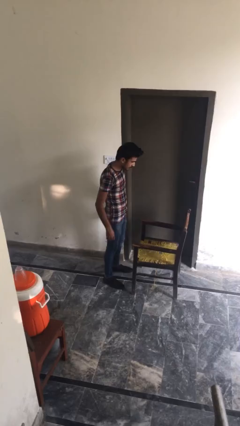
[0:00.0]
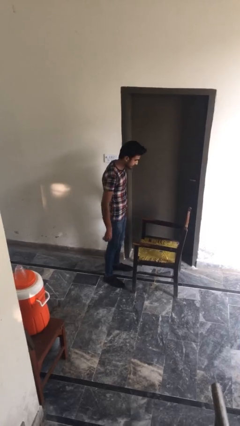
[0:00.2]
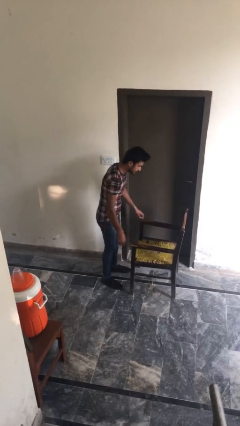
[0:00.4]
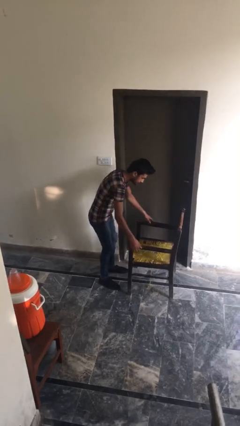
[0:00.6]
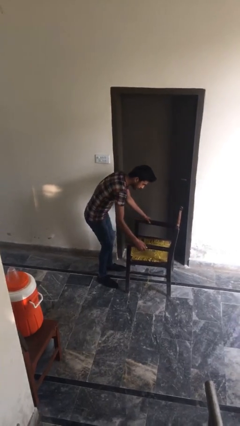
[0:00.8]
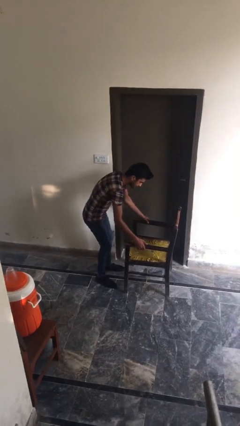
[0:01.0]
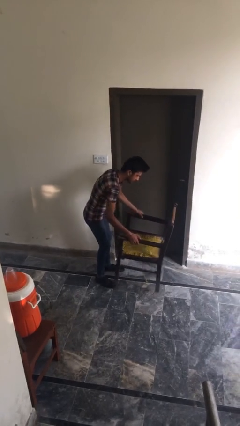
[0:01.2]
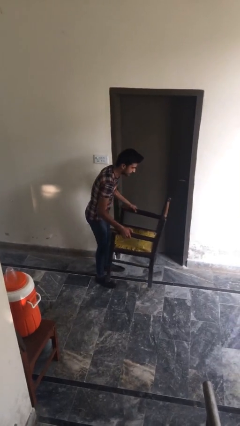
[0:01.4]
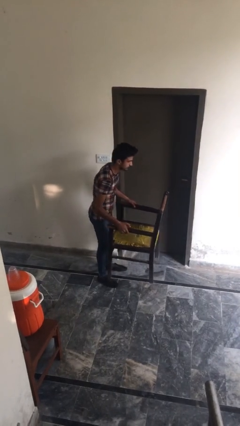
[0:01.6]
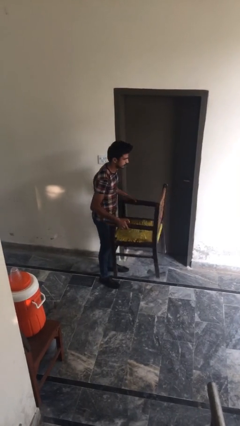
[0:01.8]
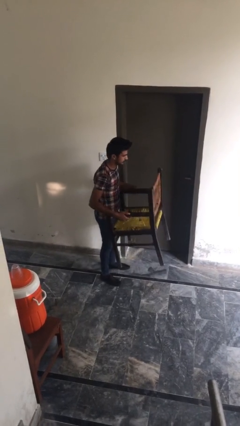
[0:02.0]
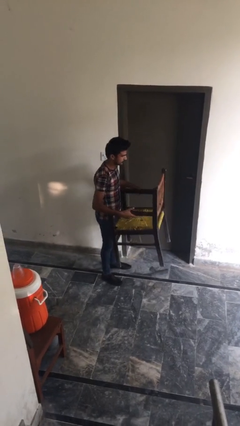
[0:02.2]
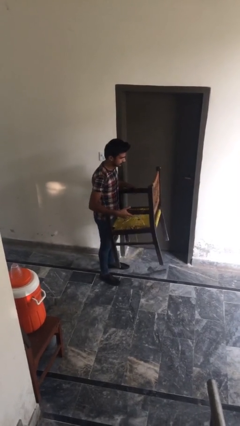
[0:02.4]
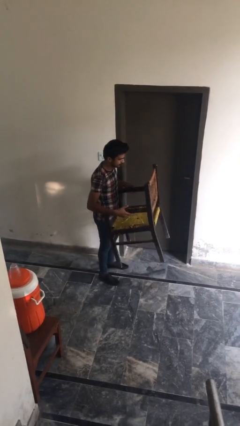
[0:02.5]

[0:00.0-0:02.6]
person picks up object from floor

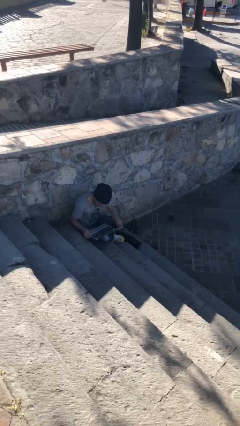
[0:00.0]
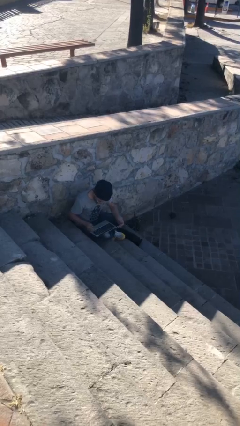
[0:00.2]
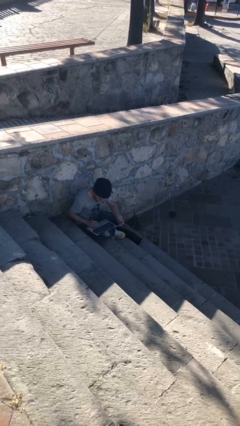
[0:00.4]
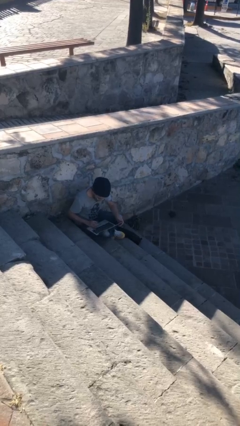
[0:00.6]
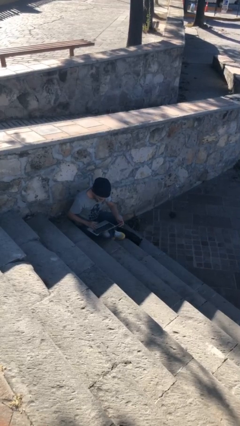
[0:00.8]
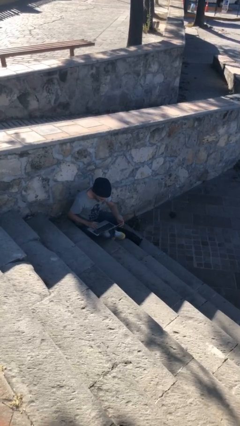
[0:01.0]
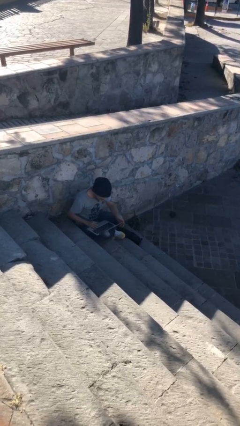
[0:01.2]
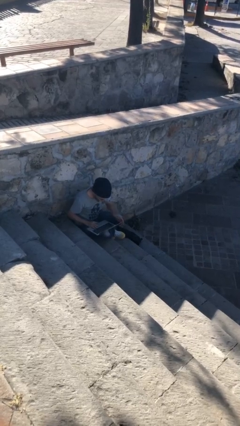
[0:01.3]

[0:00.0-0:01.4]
person interacts with laptop

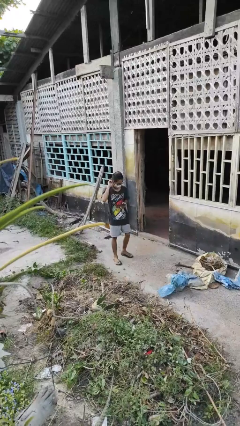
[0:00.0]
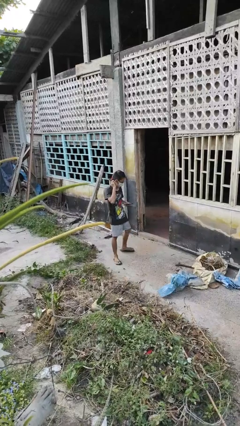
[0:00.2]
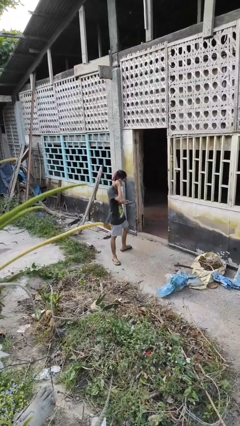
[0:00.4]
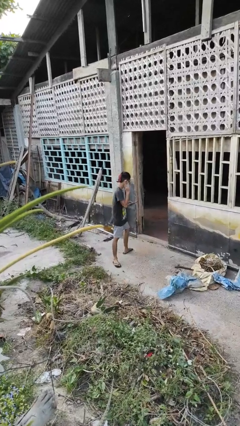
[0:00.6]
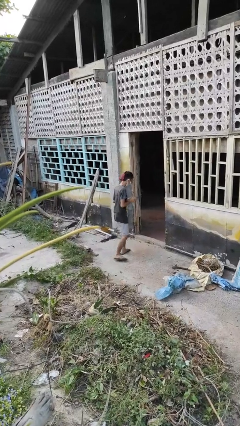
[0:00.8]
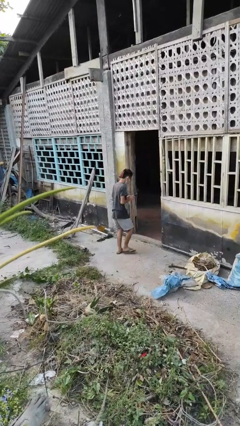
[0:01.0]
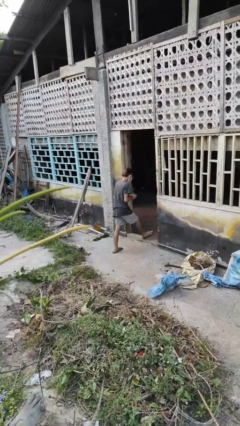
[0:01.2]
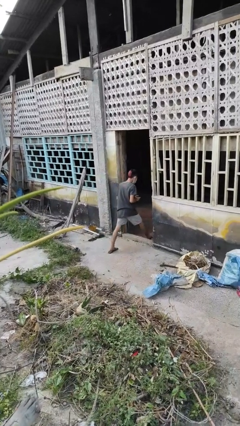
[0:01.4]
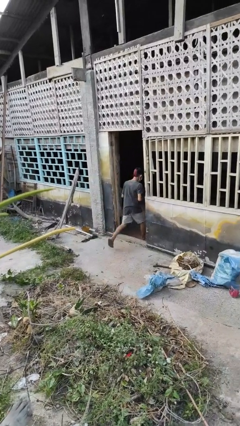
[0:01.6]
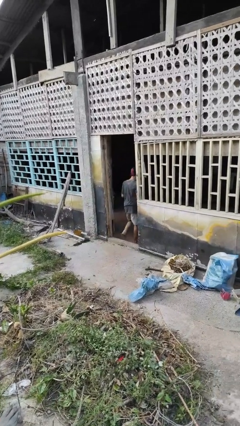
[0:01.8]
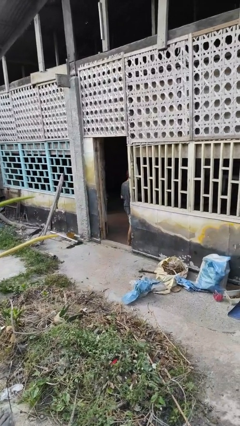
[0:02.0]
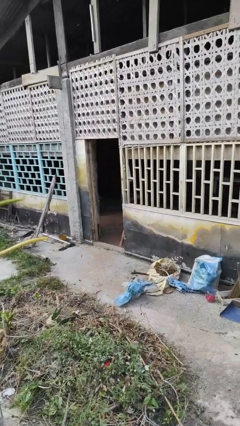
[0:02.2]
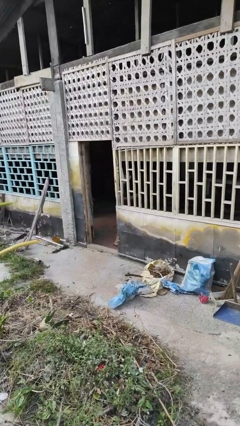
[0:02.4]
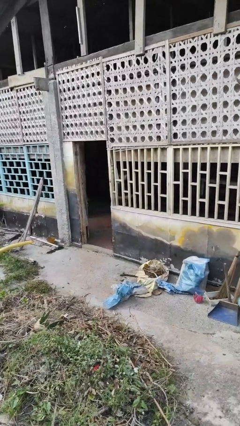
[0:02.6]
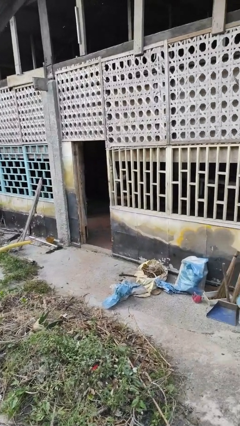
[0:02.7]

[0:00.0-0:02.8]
person exits scene through structure

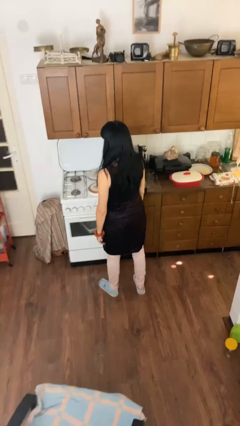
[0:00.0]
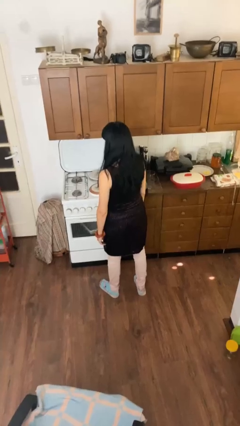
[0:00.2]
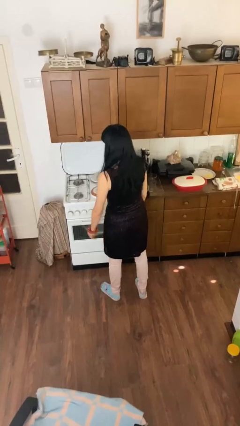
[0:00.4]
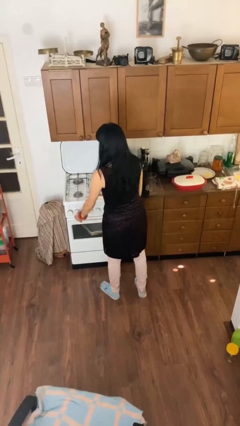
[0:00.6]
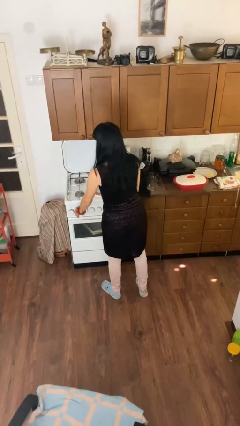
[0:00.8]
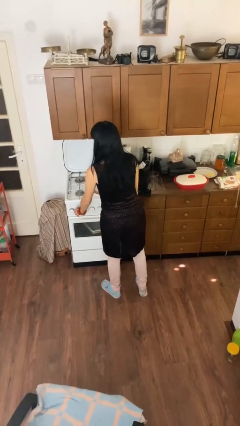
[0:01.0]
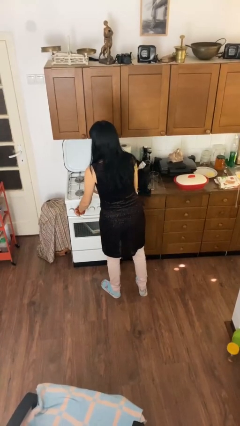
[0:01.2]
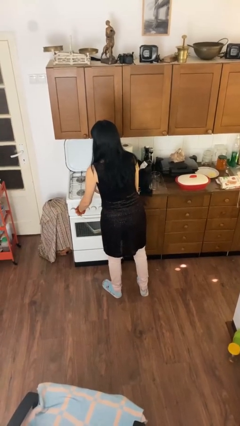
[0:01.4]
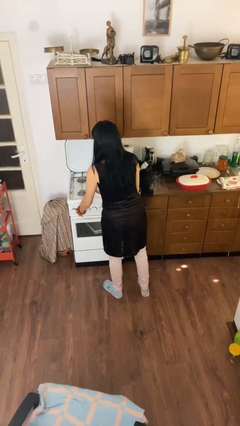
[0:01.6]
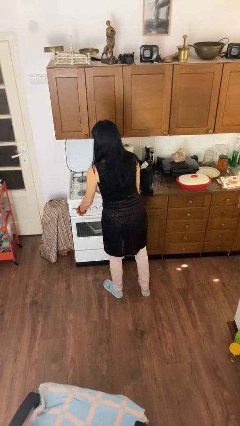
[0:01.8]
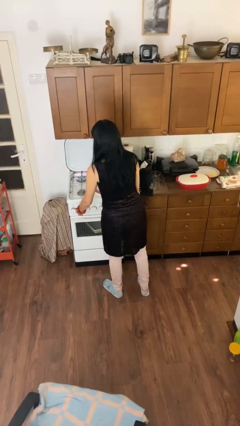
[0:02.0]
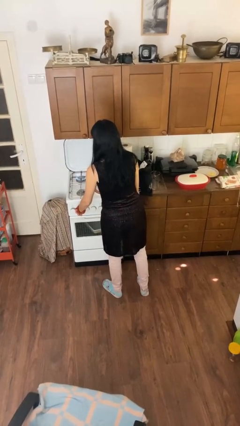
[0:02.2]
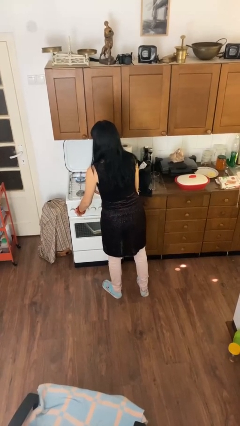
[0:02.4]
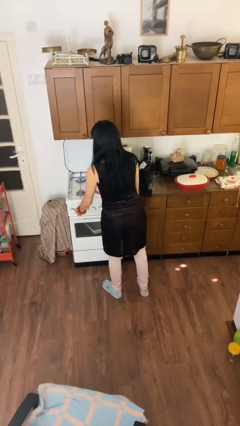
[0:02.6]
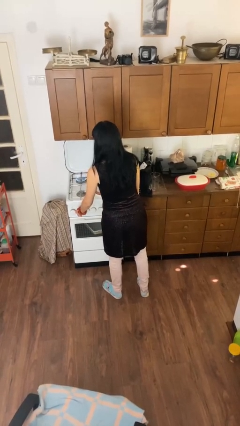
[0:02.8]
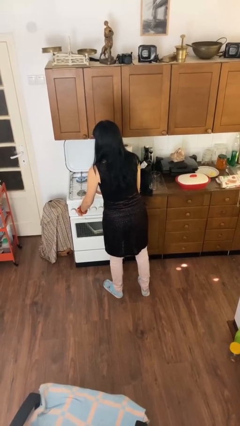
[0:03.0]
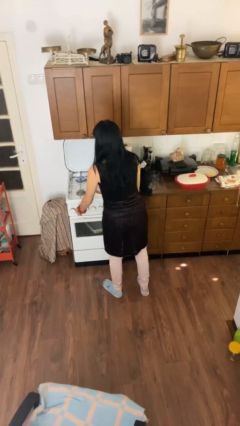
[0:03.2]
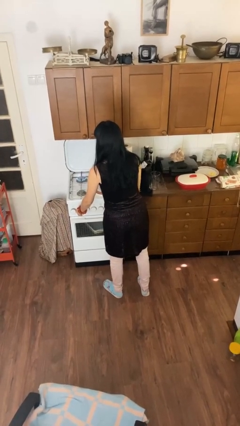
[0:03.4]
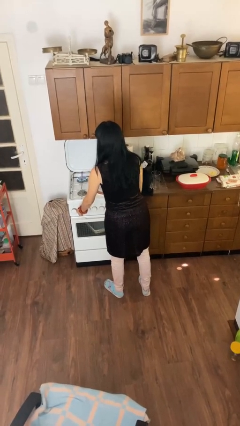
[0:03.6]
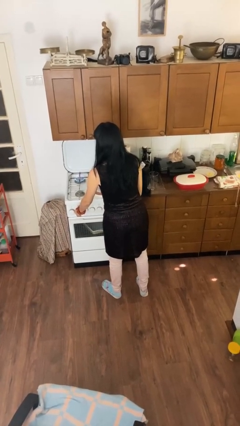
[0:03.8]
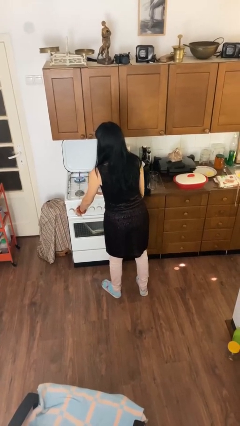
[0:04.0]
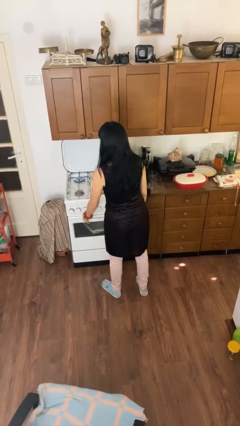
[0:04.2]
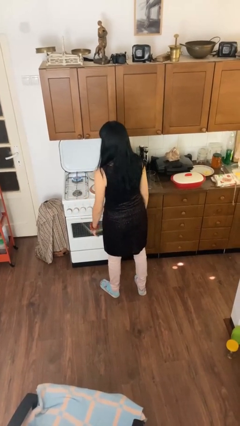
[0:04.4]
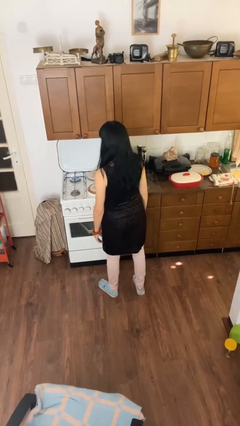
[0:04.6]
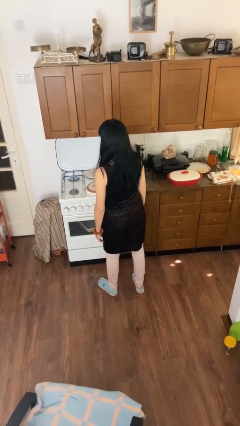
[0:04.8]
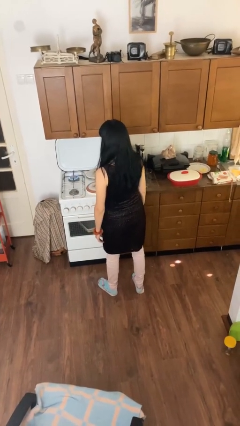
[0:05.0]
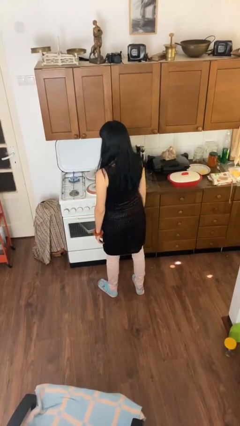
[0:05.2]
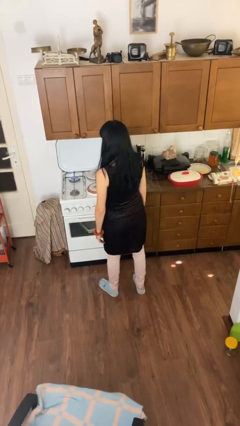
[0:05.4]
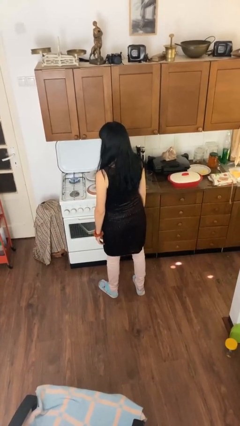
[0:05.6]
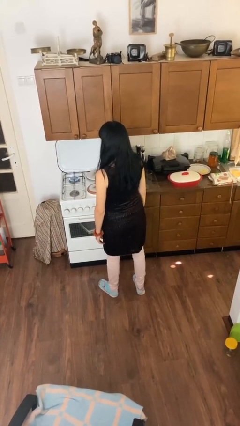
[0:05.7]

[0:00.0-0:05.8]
person turns on stovetop

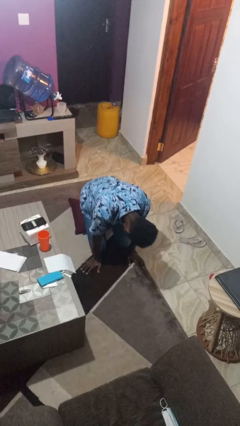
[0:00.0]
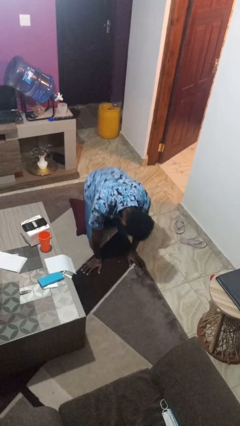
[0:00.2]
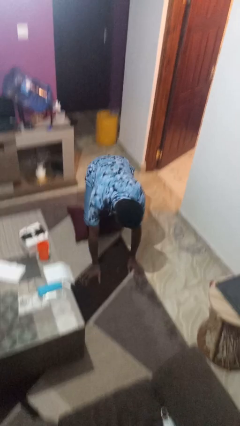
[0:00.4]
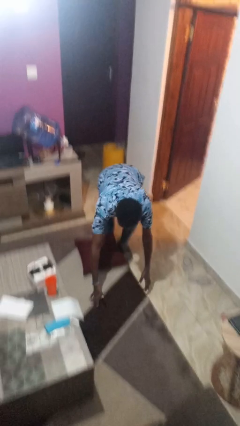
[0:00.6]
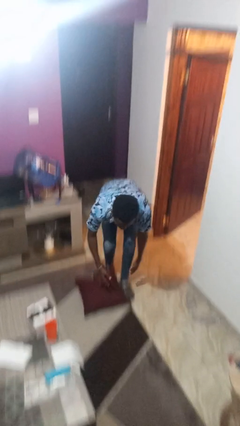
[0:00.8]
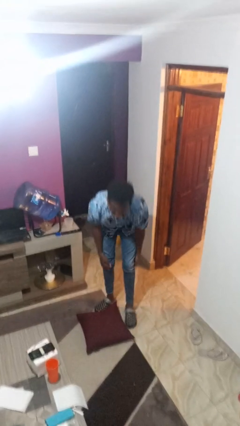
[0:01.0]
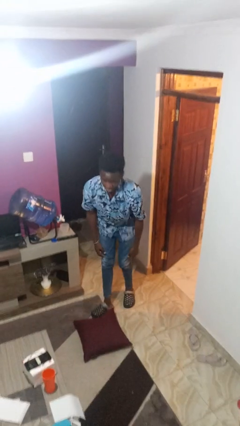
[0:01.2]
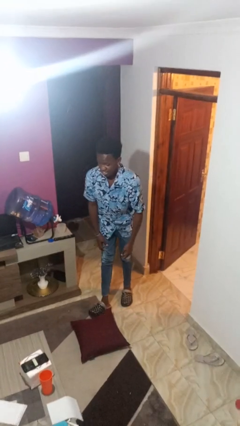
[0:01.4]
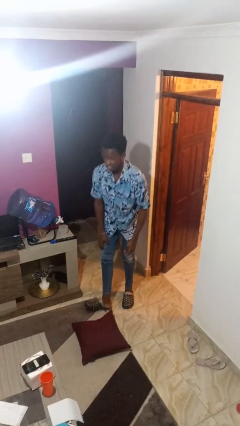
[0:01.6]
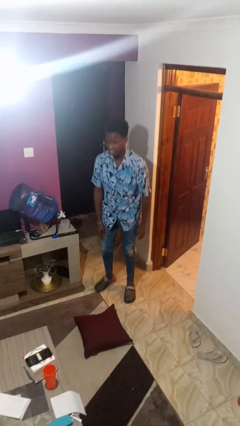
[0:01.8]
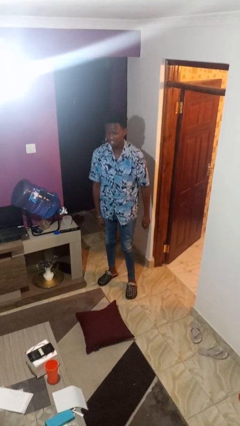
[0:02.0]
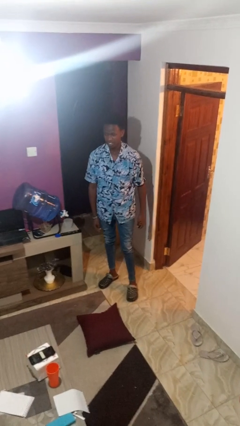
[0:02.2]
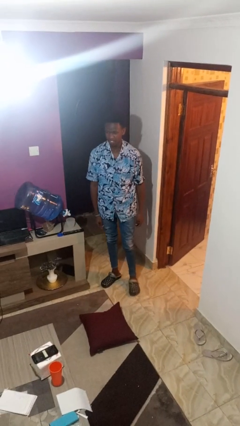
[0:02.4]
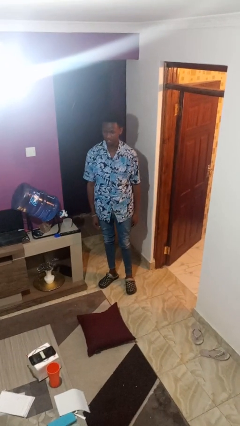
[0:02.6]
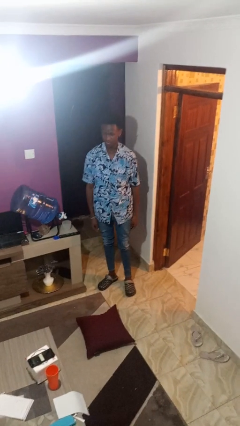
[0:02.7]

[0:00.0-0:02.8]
person stands up from floor

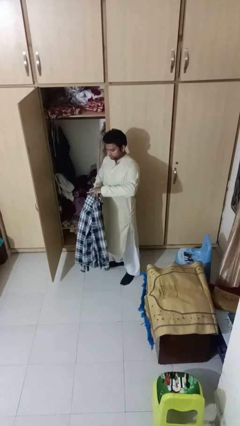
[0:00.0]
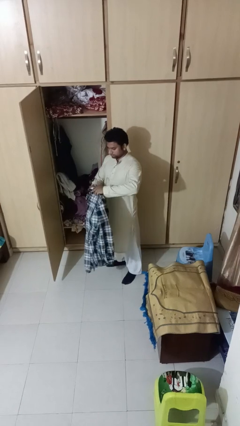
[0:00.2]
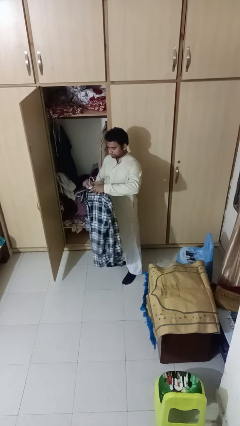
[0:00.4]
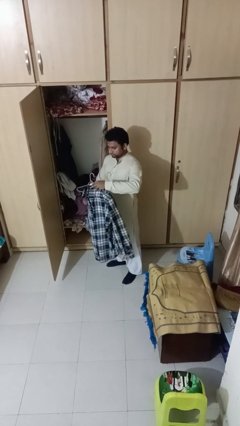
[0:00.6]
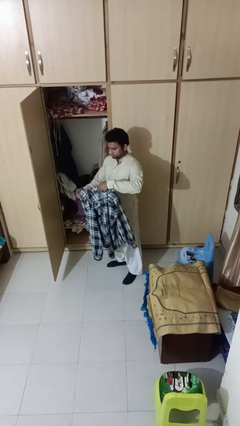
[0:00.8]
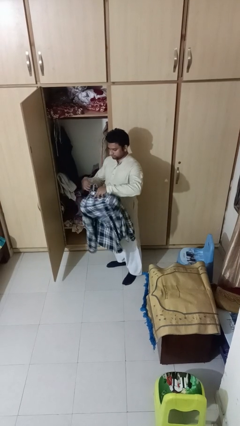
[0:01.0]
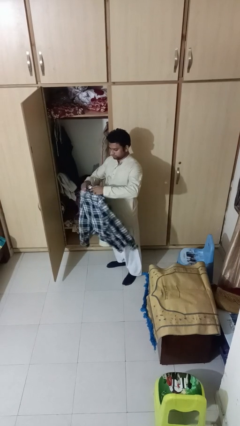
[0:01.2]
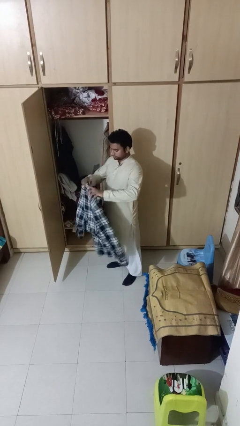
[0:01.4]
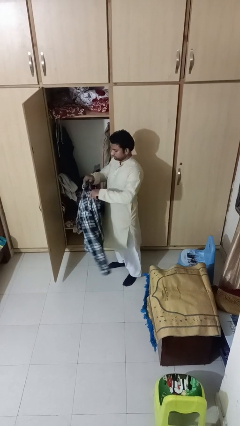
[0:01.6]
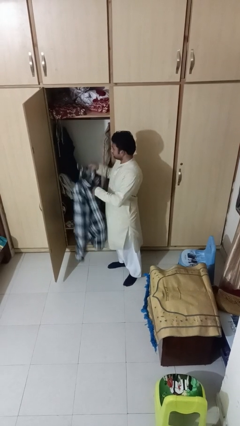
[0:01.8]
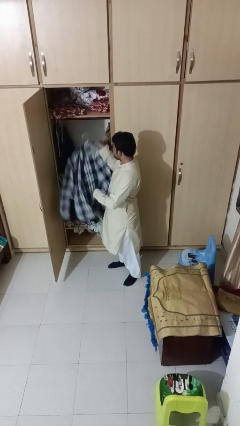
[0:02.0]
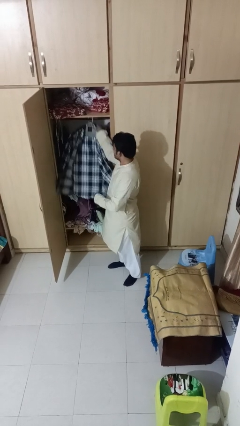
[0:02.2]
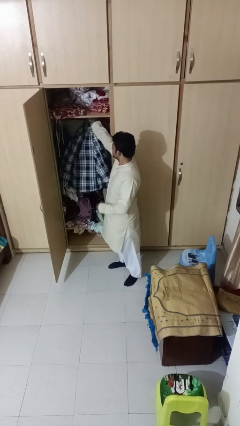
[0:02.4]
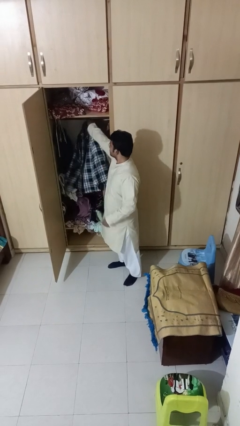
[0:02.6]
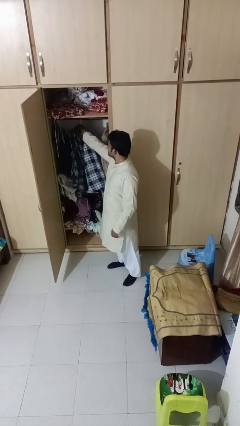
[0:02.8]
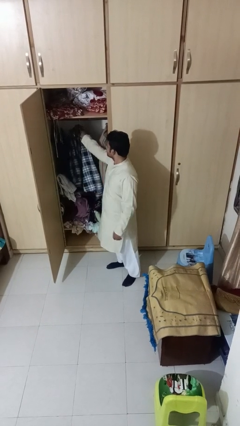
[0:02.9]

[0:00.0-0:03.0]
person puts clothes into closet
